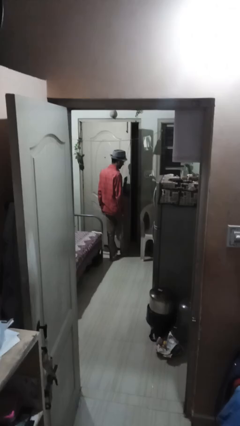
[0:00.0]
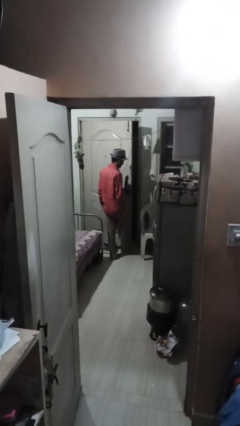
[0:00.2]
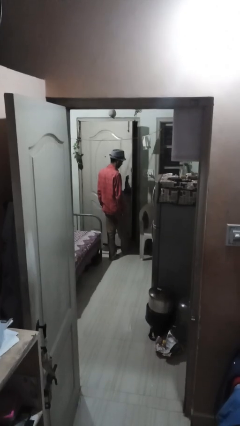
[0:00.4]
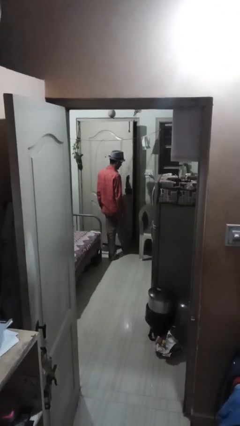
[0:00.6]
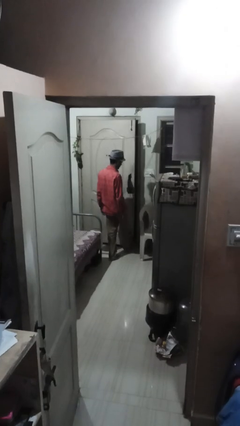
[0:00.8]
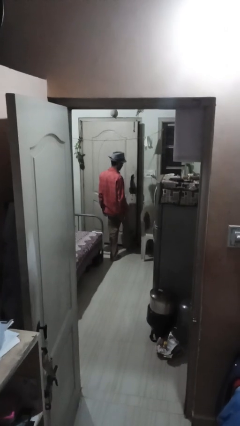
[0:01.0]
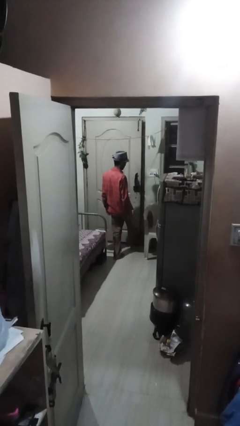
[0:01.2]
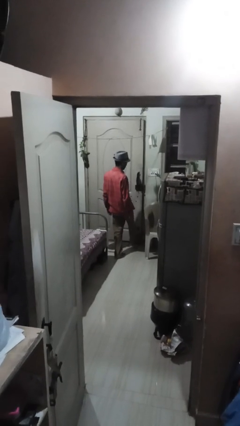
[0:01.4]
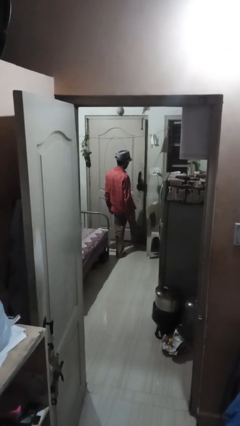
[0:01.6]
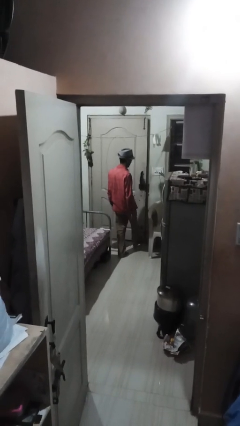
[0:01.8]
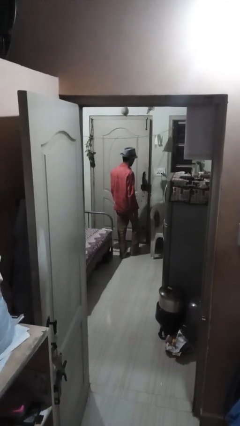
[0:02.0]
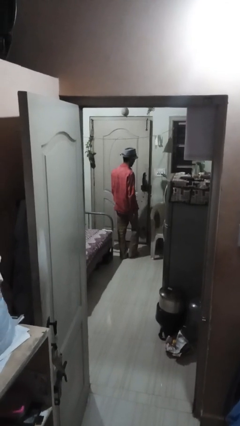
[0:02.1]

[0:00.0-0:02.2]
person closes door with foot

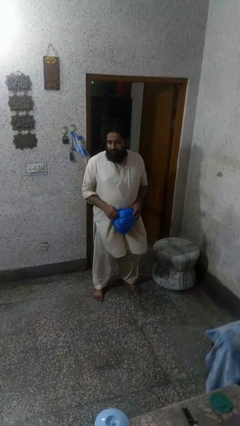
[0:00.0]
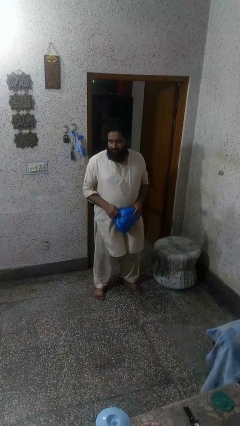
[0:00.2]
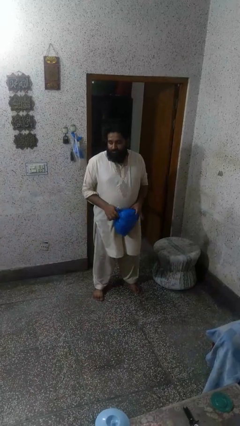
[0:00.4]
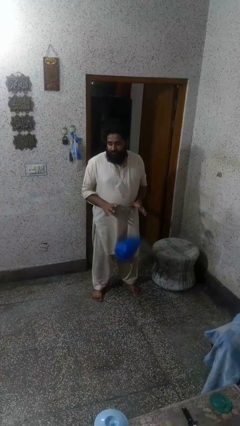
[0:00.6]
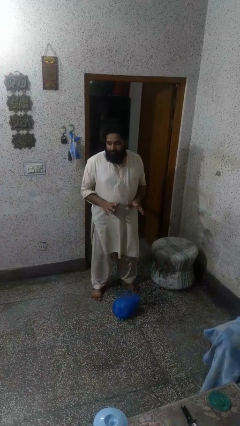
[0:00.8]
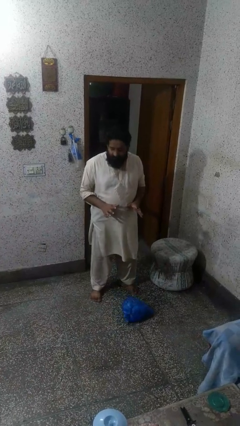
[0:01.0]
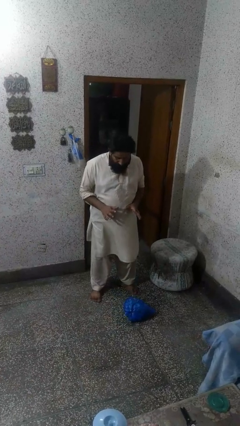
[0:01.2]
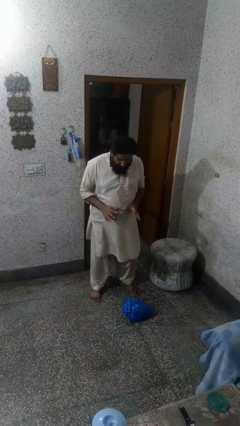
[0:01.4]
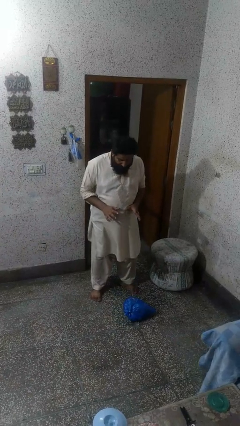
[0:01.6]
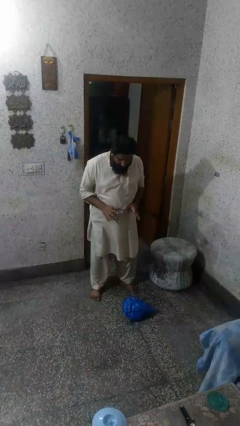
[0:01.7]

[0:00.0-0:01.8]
person drops object

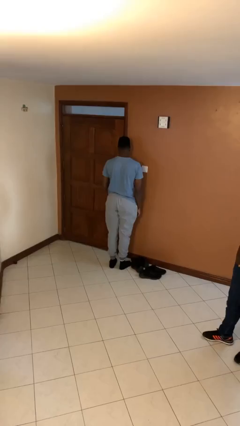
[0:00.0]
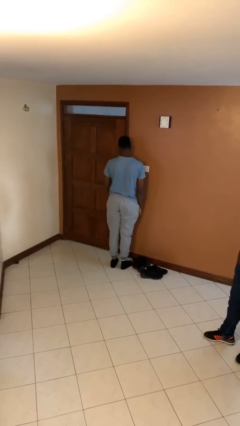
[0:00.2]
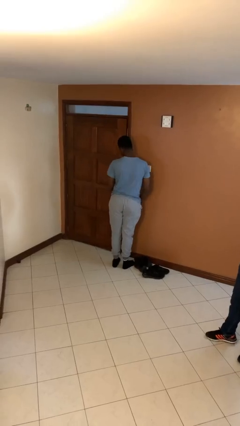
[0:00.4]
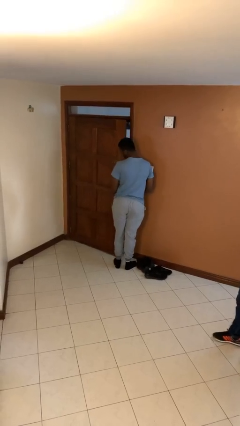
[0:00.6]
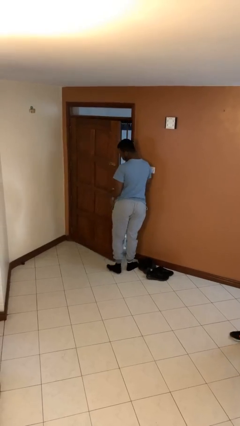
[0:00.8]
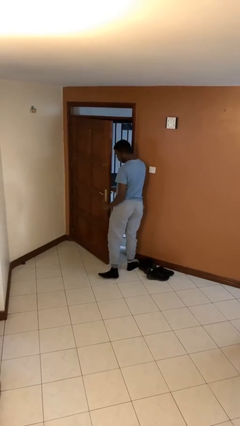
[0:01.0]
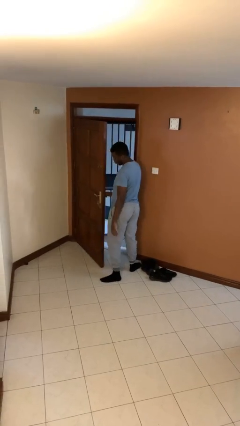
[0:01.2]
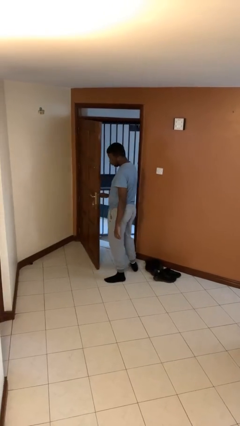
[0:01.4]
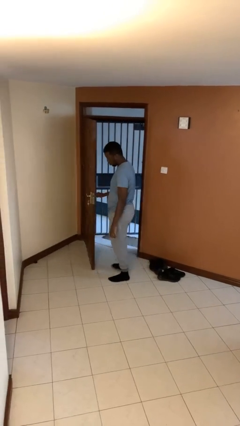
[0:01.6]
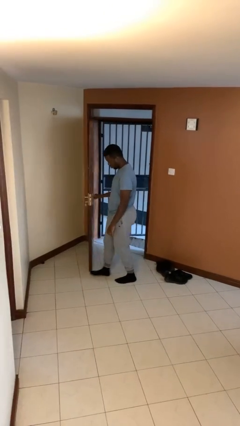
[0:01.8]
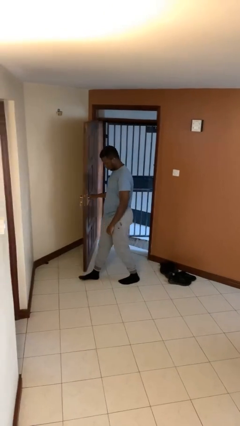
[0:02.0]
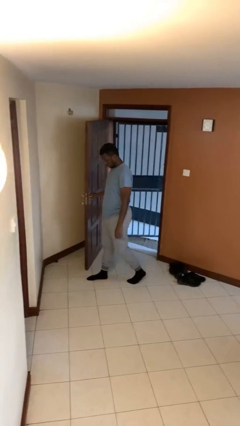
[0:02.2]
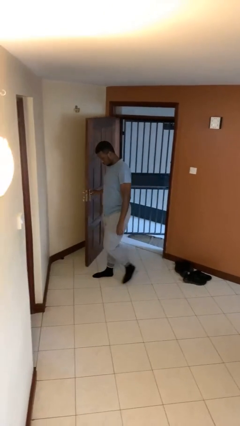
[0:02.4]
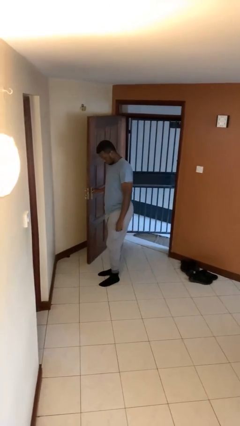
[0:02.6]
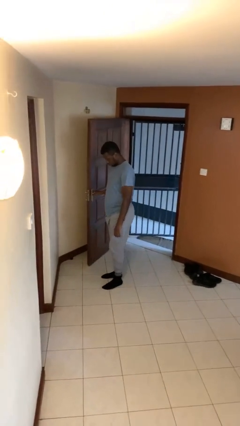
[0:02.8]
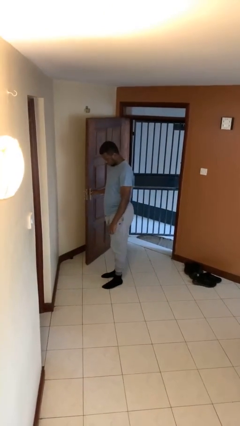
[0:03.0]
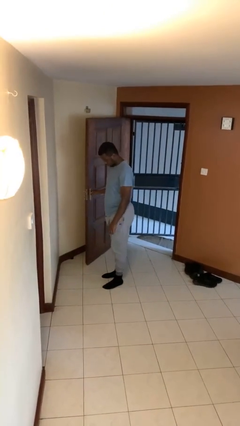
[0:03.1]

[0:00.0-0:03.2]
person opens facility door

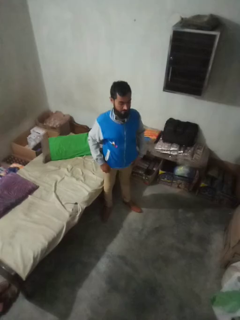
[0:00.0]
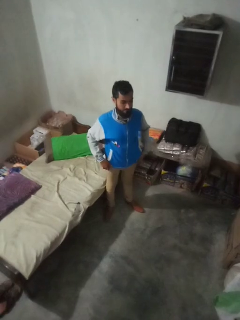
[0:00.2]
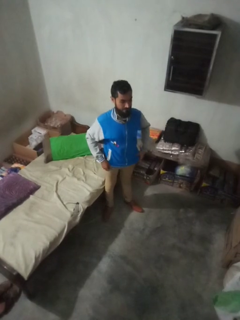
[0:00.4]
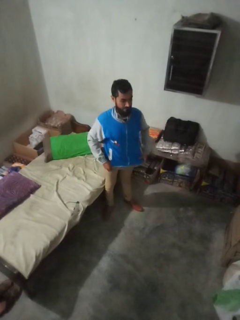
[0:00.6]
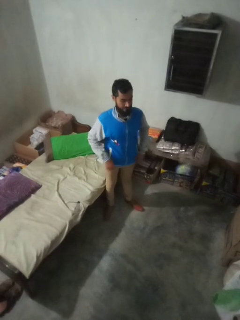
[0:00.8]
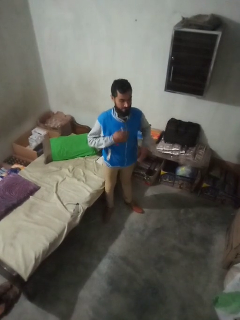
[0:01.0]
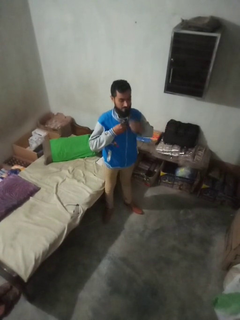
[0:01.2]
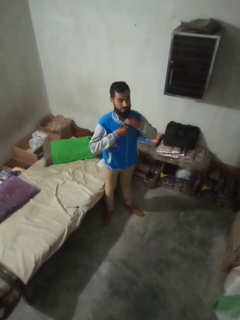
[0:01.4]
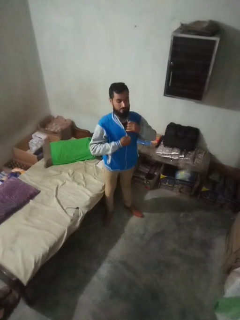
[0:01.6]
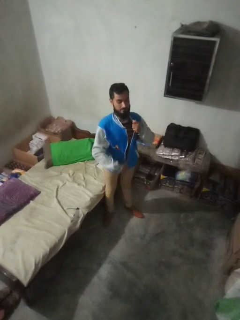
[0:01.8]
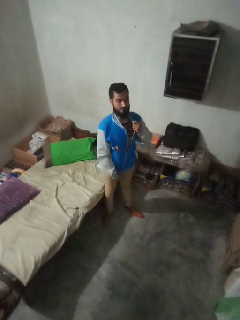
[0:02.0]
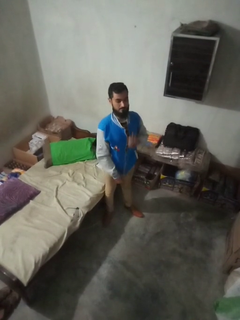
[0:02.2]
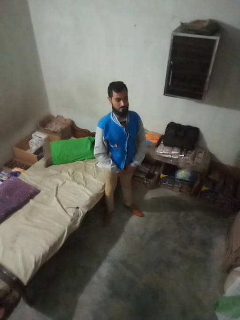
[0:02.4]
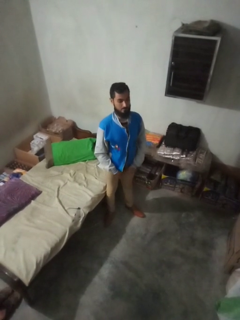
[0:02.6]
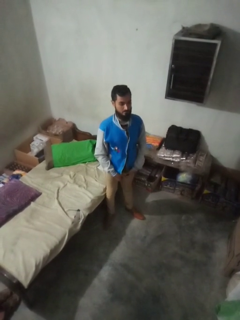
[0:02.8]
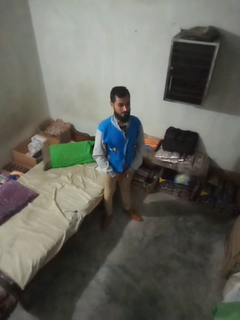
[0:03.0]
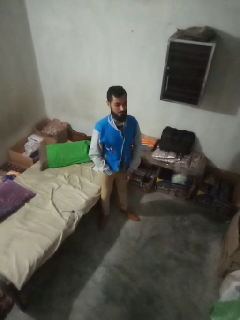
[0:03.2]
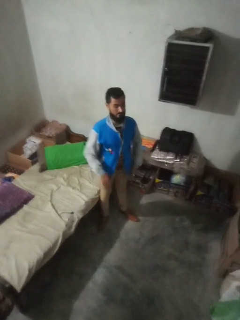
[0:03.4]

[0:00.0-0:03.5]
person unzips jacket

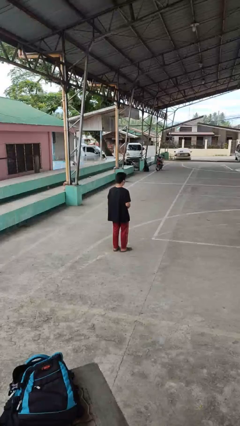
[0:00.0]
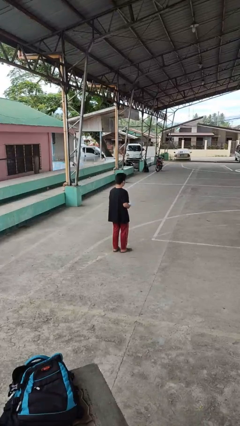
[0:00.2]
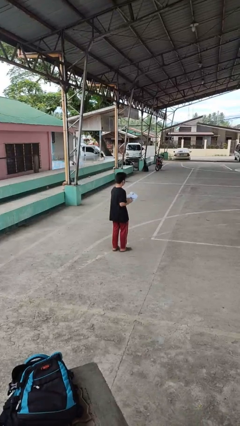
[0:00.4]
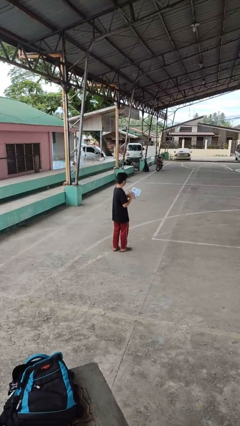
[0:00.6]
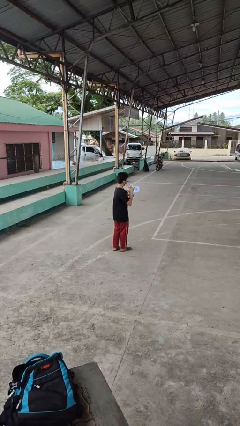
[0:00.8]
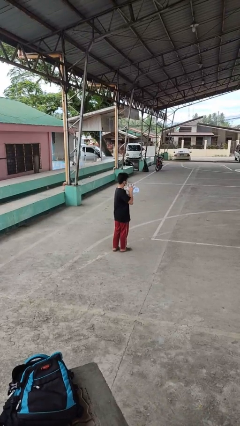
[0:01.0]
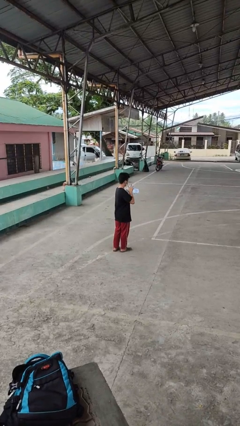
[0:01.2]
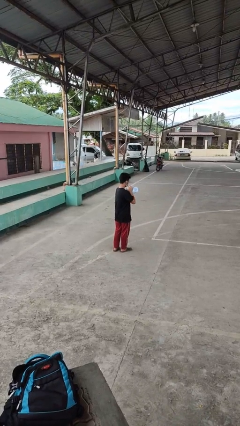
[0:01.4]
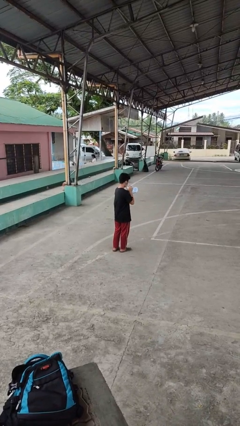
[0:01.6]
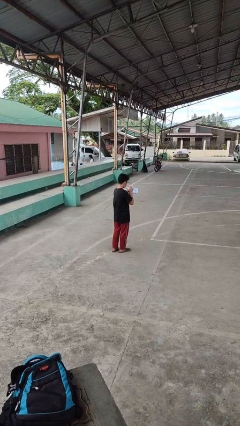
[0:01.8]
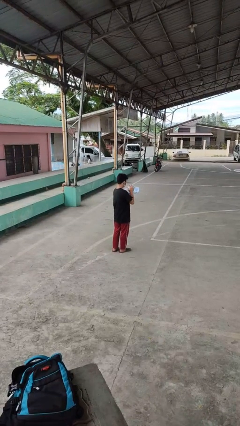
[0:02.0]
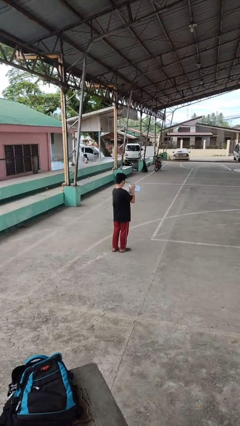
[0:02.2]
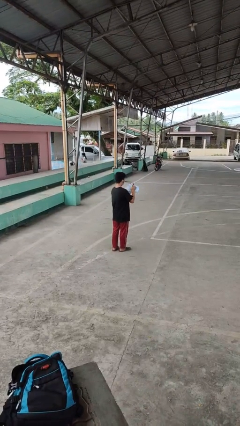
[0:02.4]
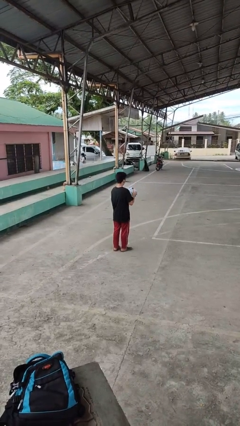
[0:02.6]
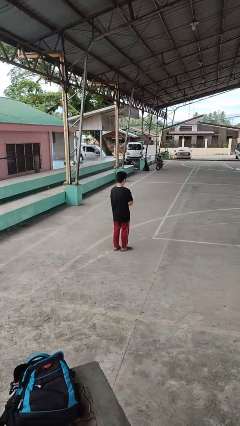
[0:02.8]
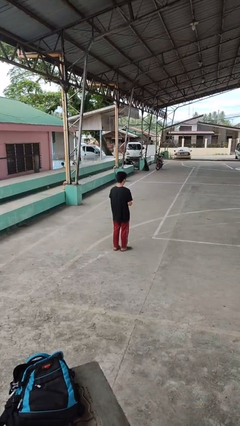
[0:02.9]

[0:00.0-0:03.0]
person squeezes object

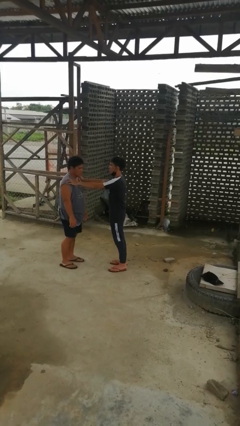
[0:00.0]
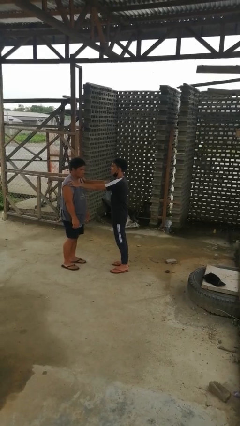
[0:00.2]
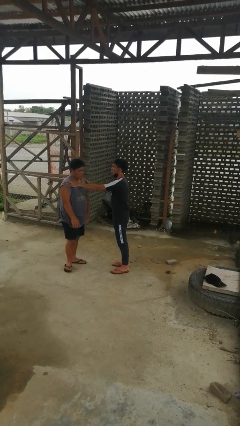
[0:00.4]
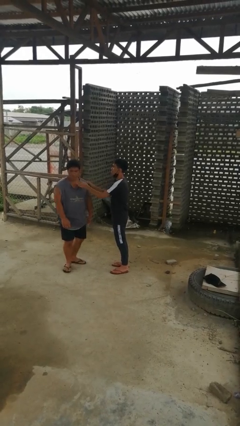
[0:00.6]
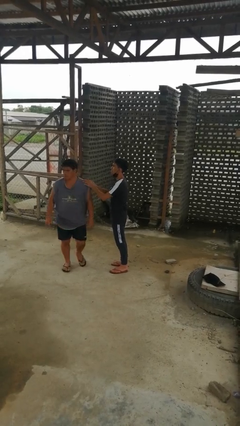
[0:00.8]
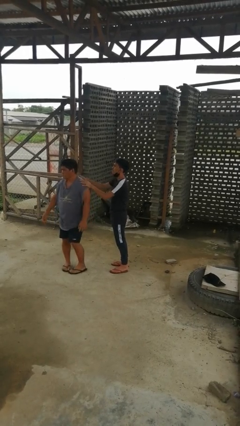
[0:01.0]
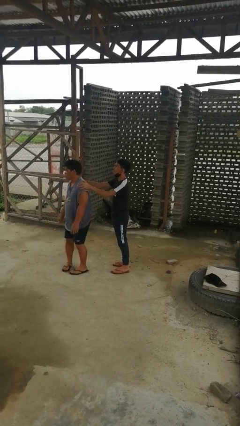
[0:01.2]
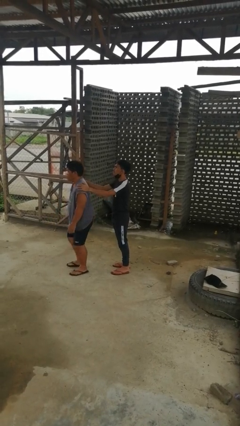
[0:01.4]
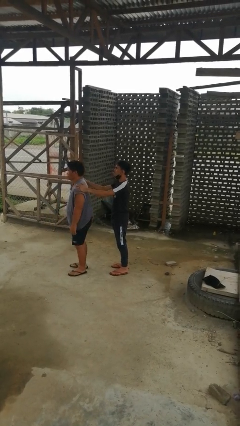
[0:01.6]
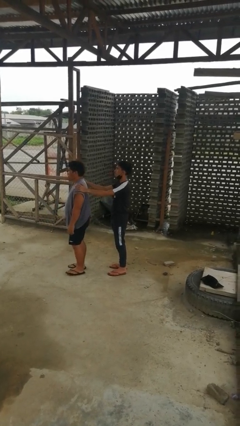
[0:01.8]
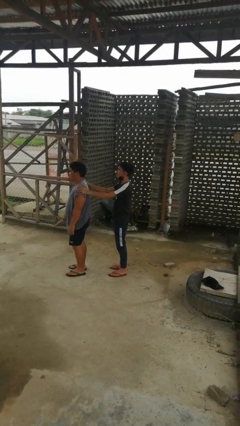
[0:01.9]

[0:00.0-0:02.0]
person spins person around

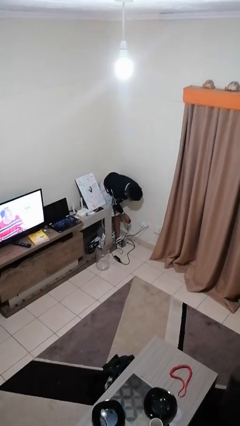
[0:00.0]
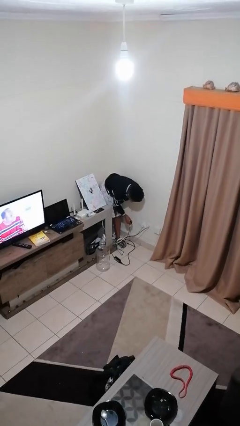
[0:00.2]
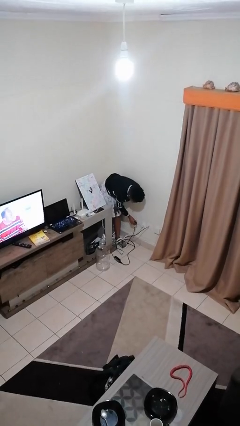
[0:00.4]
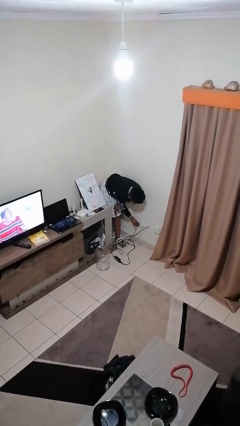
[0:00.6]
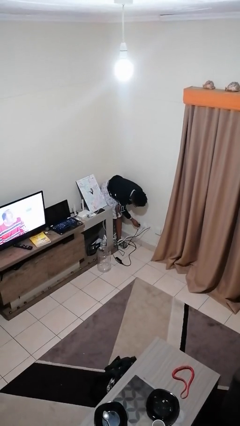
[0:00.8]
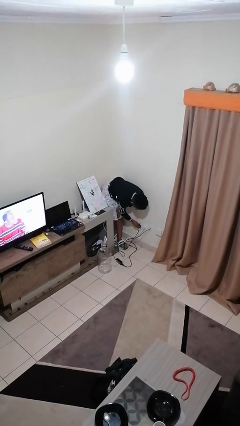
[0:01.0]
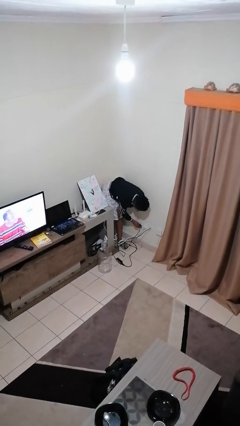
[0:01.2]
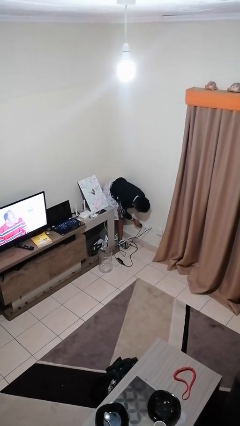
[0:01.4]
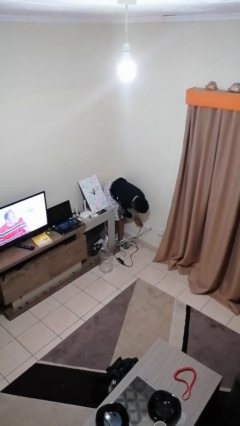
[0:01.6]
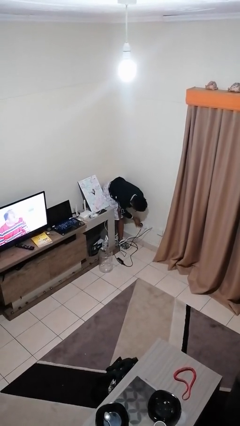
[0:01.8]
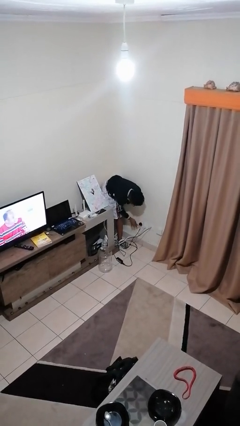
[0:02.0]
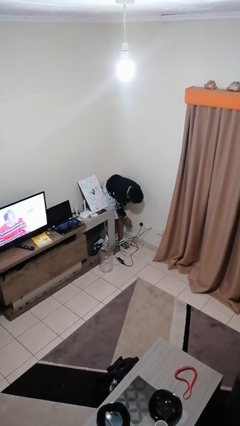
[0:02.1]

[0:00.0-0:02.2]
person plugs into electrical socket
